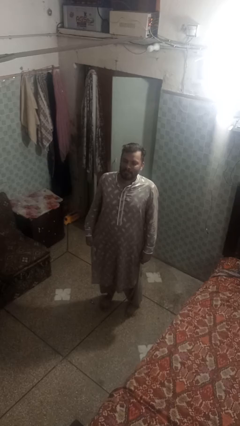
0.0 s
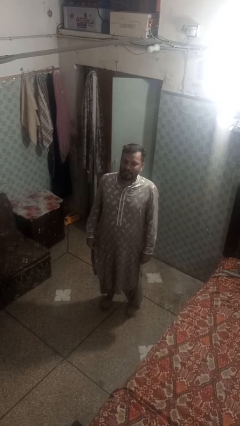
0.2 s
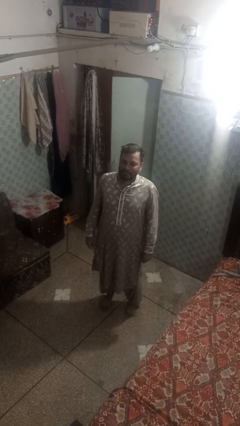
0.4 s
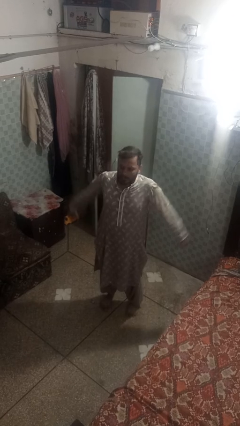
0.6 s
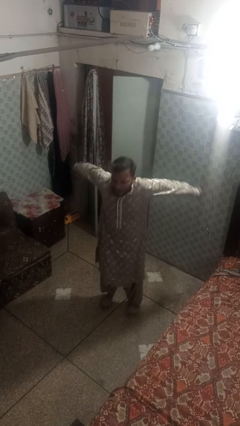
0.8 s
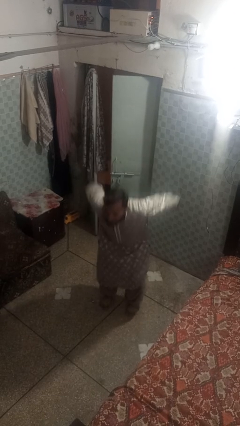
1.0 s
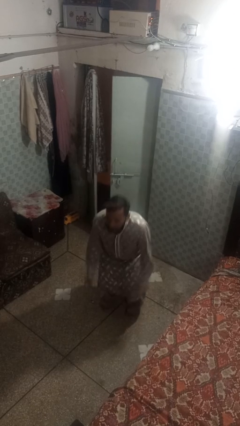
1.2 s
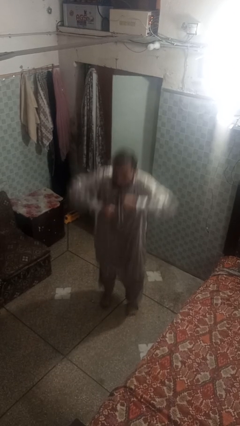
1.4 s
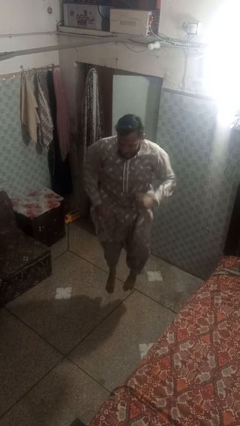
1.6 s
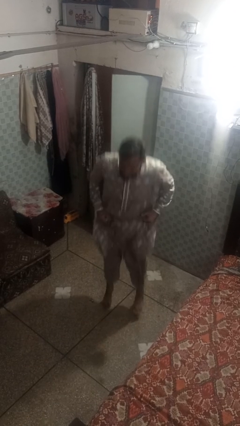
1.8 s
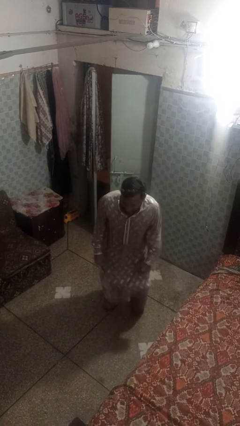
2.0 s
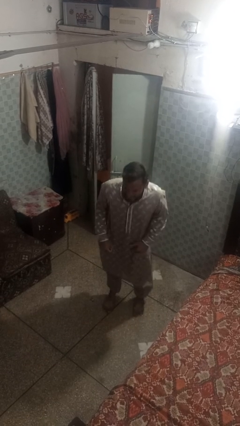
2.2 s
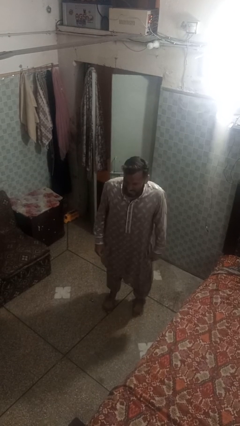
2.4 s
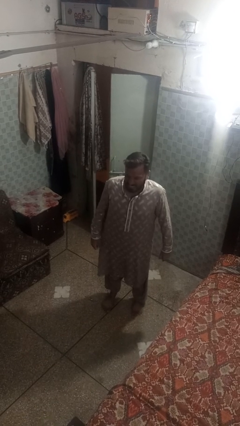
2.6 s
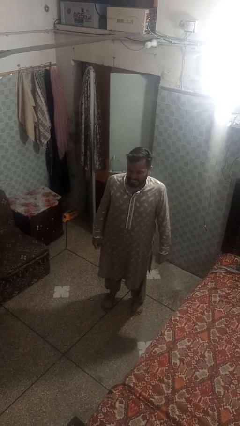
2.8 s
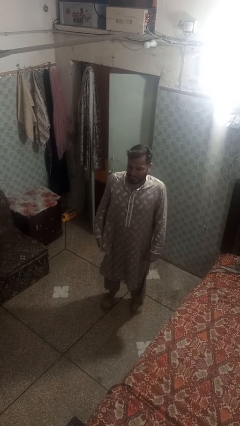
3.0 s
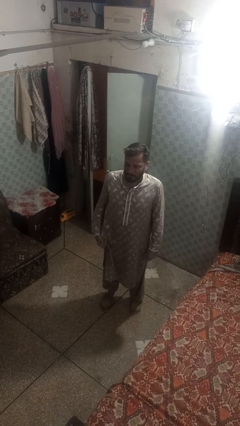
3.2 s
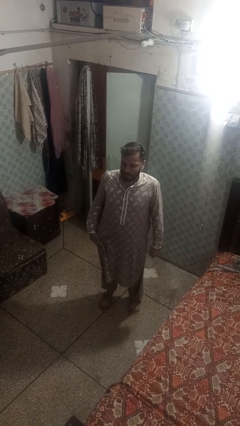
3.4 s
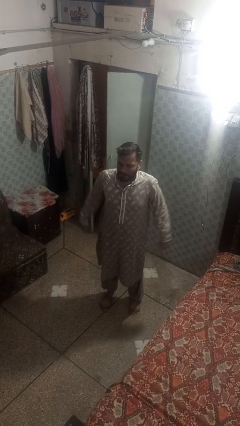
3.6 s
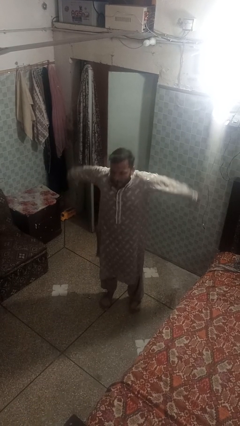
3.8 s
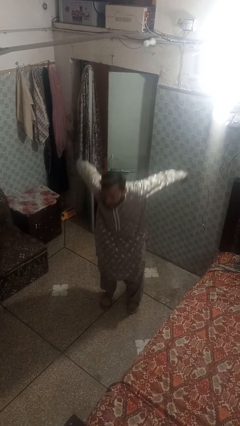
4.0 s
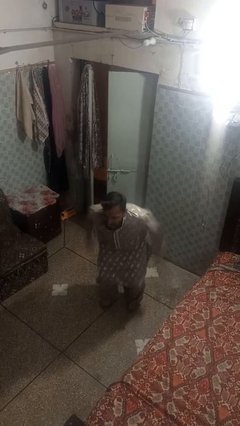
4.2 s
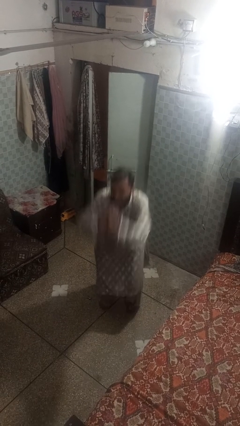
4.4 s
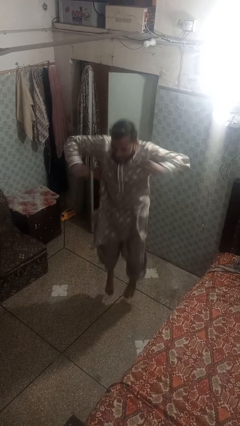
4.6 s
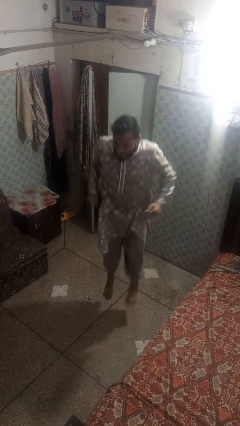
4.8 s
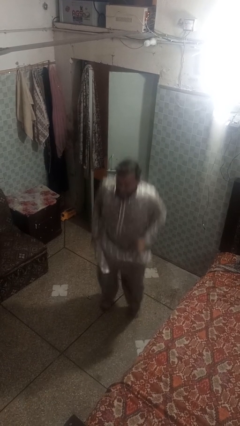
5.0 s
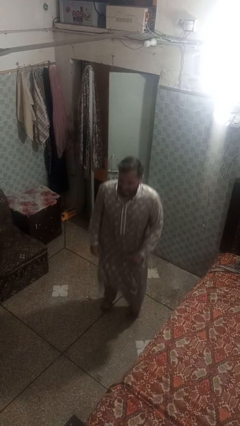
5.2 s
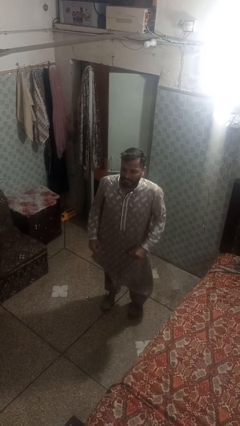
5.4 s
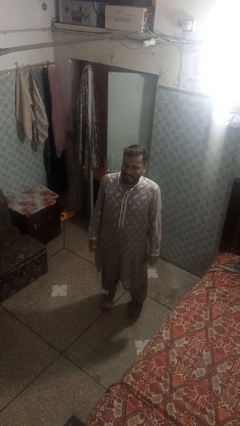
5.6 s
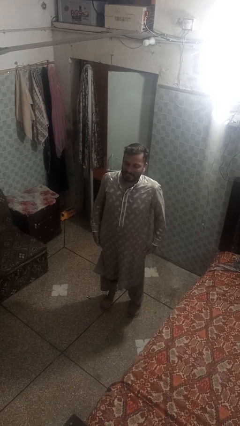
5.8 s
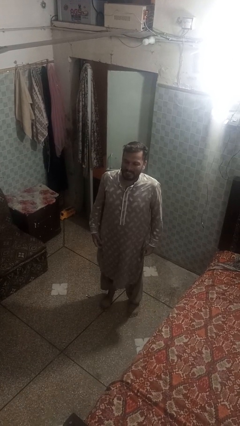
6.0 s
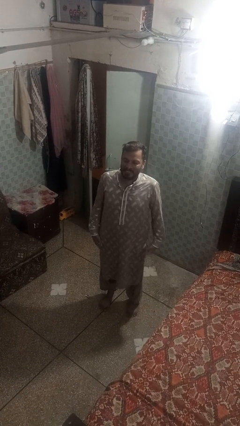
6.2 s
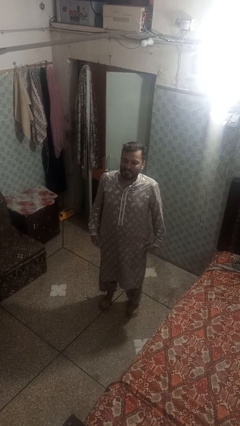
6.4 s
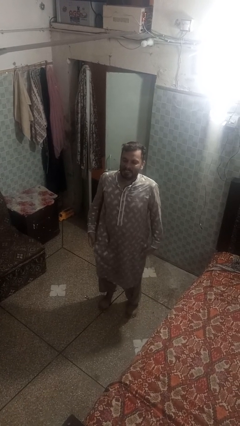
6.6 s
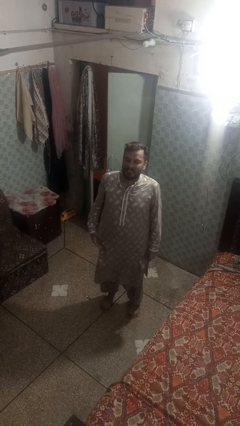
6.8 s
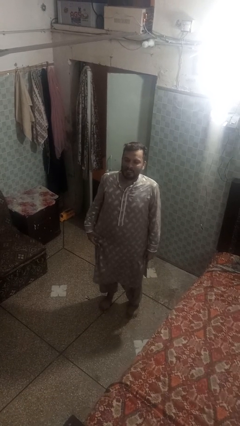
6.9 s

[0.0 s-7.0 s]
person jumps

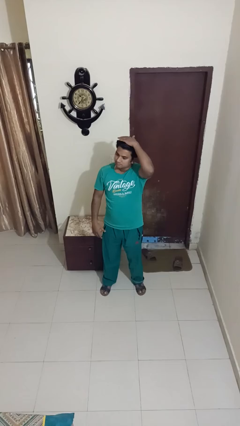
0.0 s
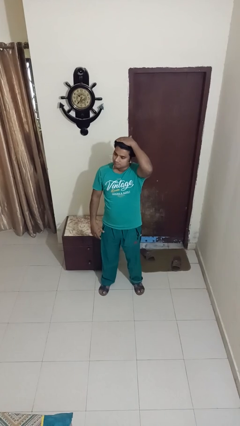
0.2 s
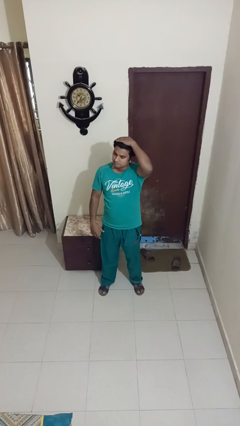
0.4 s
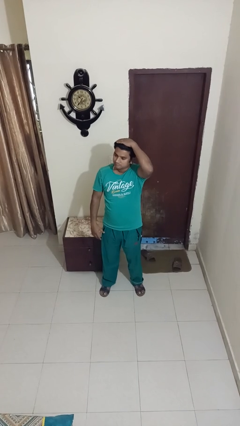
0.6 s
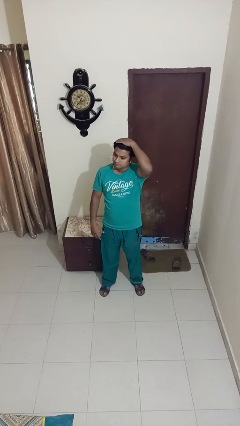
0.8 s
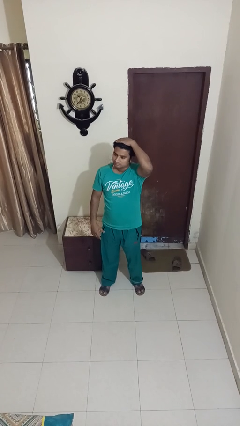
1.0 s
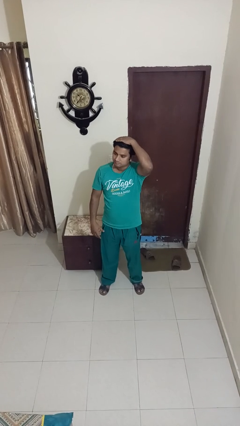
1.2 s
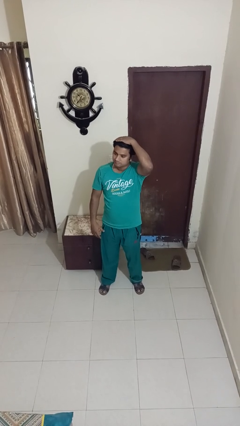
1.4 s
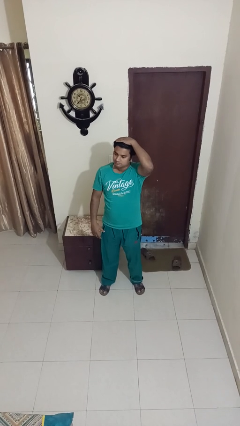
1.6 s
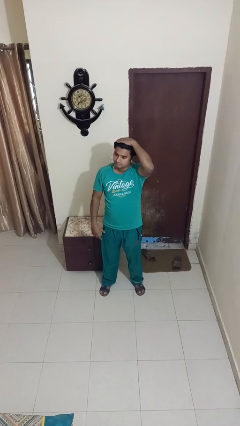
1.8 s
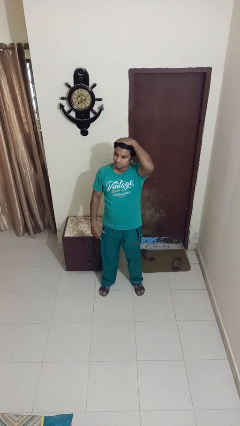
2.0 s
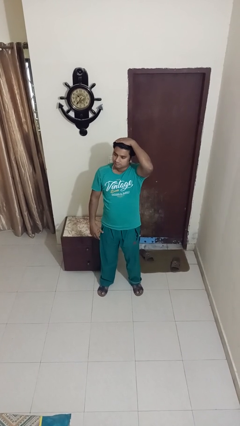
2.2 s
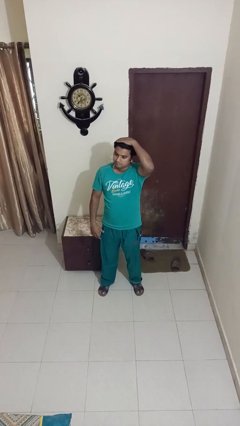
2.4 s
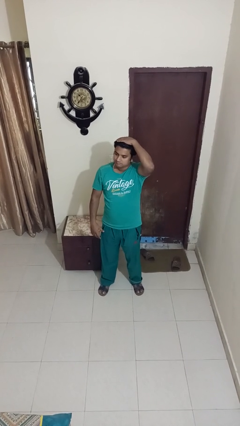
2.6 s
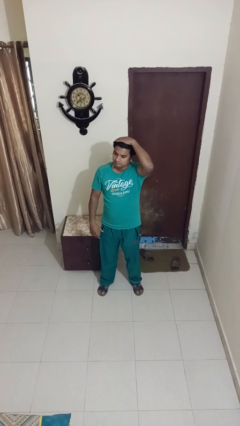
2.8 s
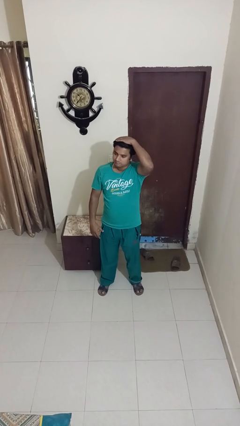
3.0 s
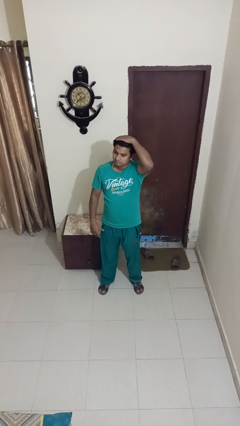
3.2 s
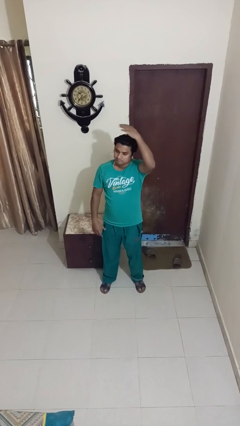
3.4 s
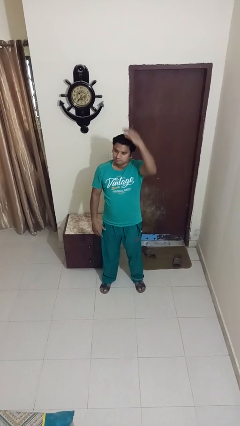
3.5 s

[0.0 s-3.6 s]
person pats head

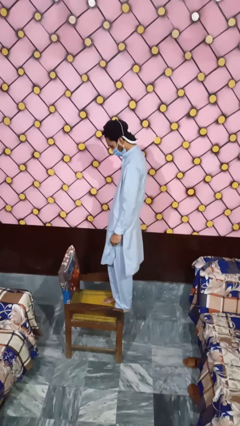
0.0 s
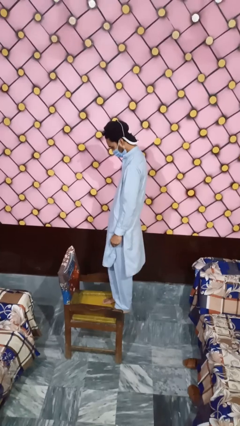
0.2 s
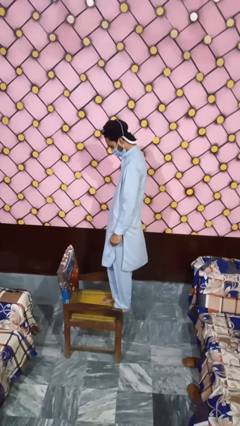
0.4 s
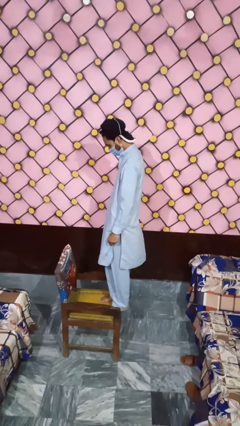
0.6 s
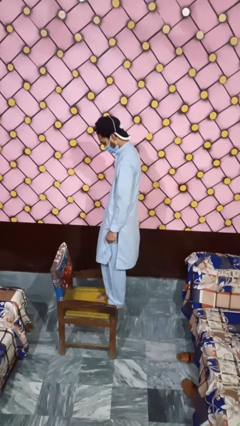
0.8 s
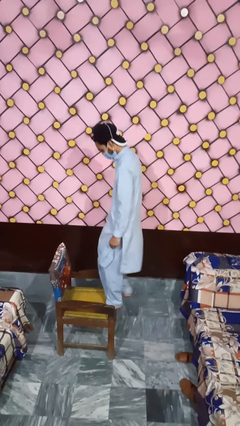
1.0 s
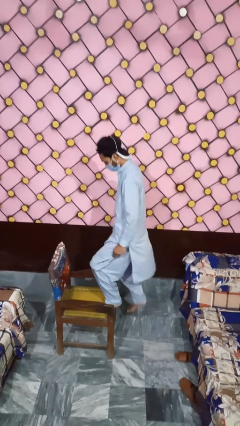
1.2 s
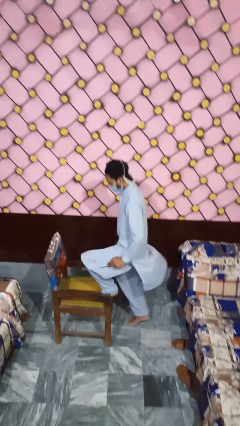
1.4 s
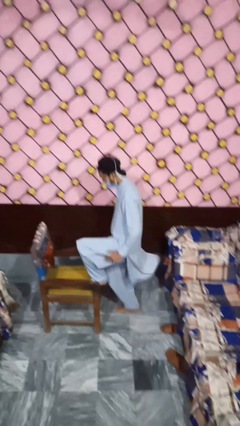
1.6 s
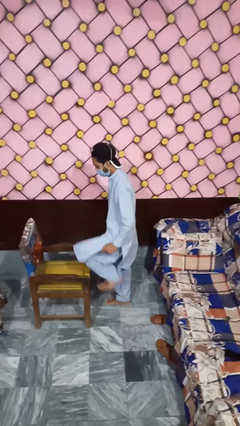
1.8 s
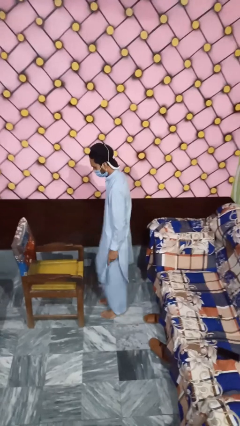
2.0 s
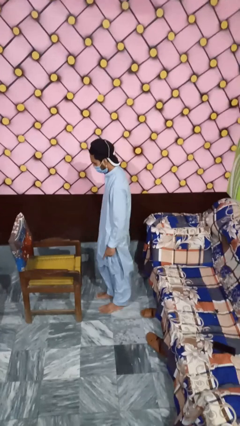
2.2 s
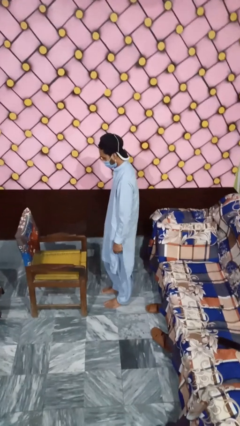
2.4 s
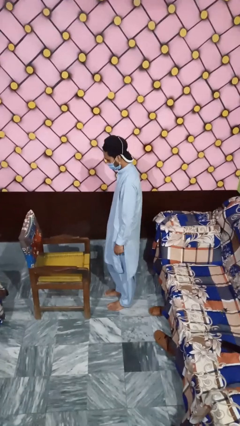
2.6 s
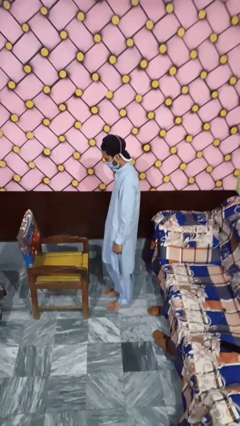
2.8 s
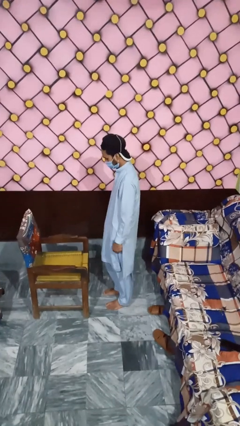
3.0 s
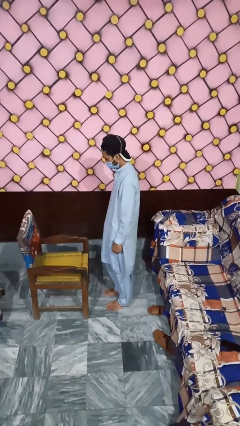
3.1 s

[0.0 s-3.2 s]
person climbs off chair

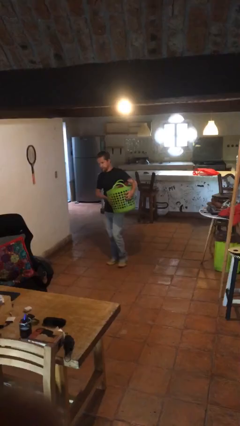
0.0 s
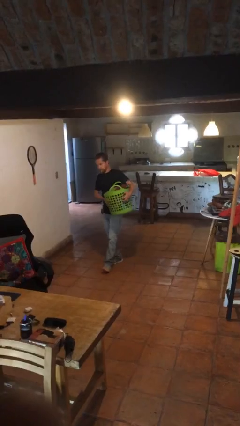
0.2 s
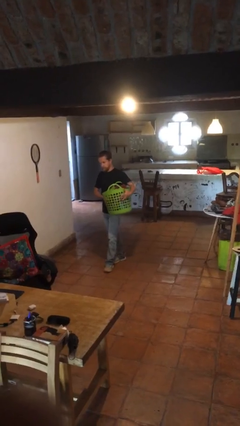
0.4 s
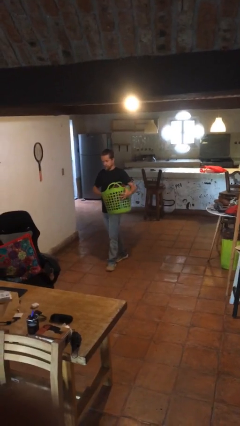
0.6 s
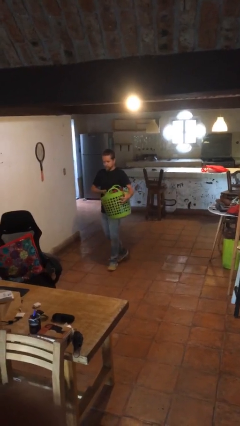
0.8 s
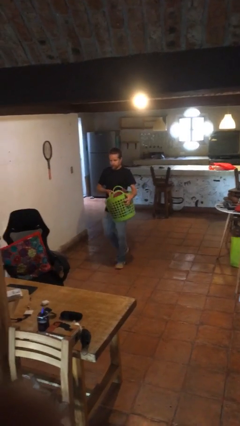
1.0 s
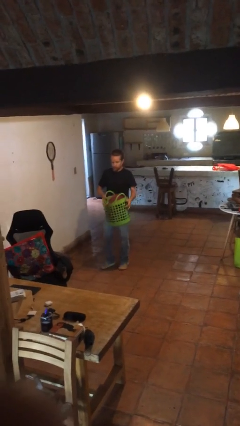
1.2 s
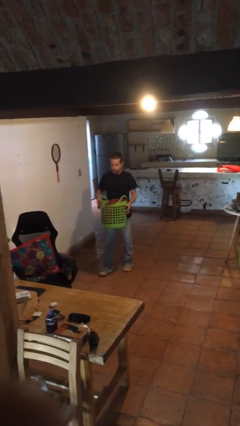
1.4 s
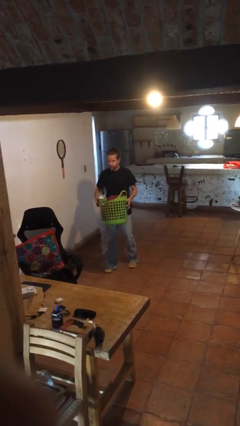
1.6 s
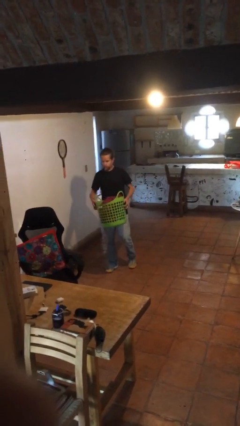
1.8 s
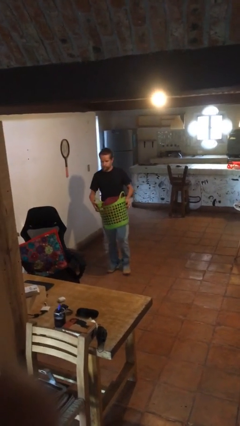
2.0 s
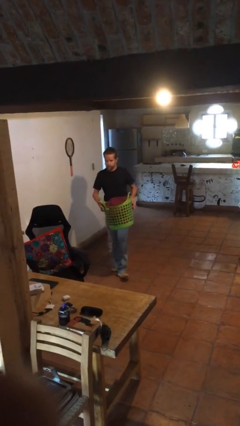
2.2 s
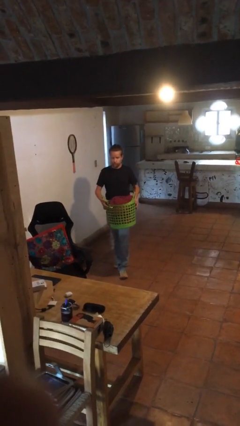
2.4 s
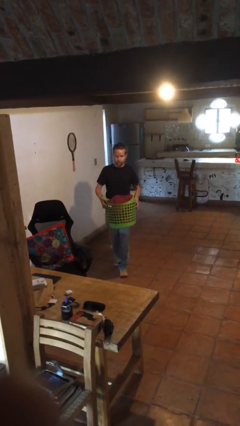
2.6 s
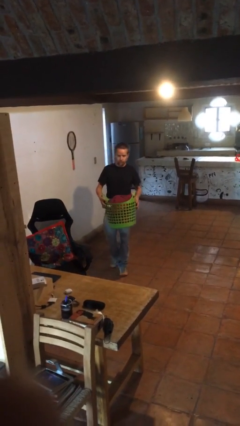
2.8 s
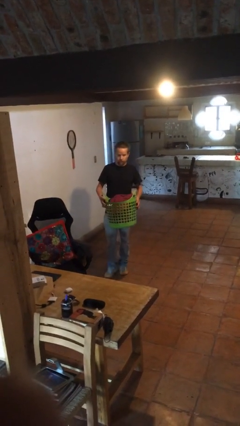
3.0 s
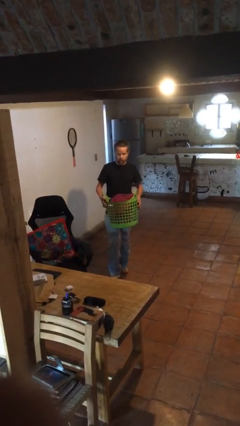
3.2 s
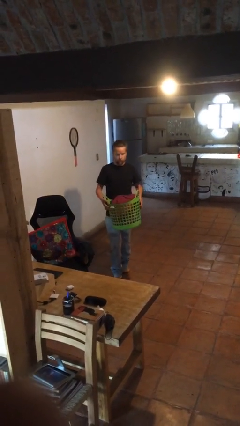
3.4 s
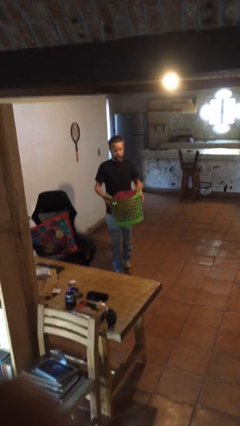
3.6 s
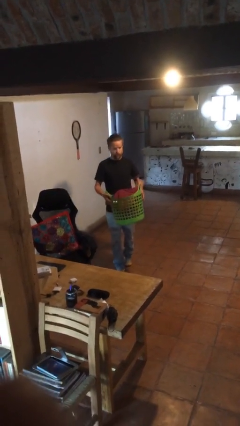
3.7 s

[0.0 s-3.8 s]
person carries laundry basket

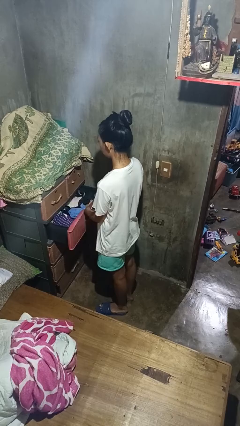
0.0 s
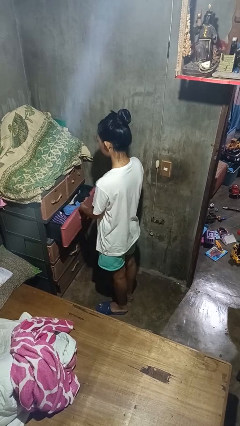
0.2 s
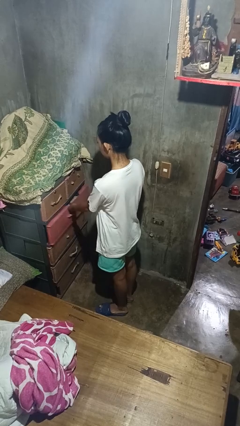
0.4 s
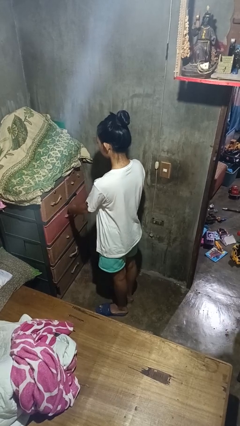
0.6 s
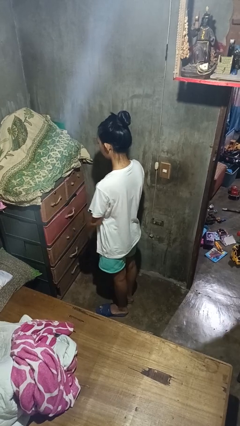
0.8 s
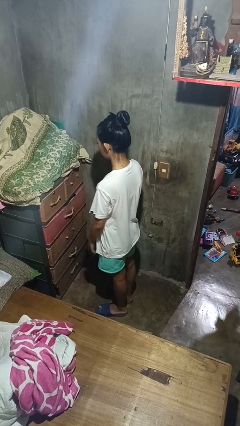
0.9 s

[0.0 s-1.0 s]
person closes dresser drawer
